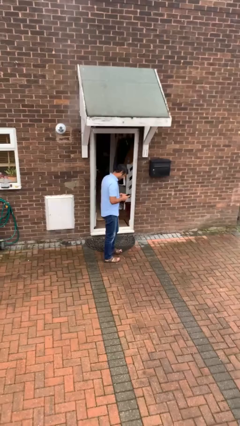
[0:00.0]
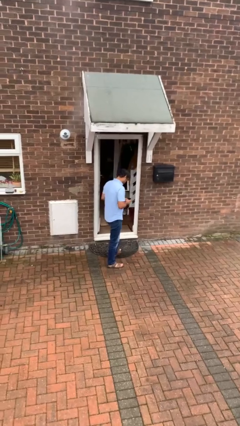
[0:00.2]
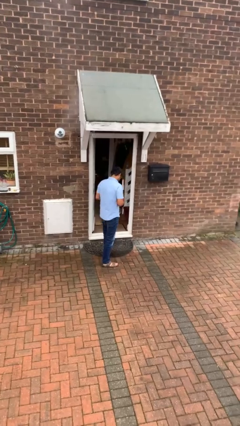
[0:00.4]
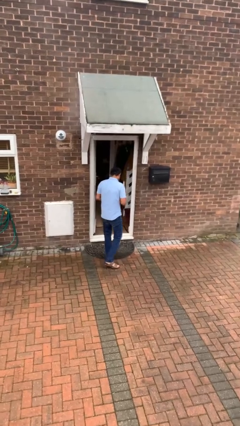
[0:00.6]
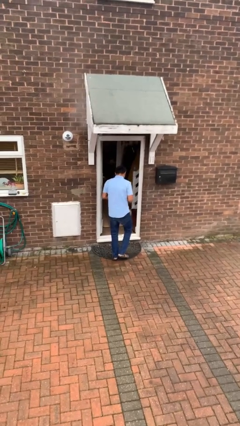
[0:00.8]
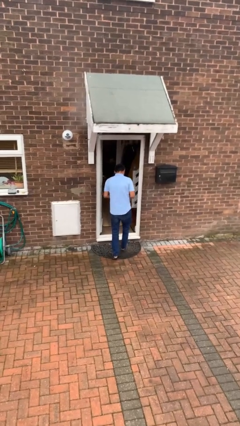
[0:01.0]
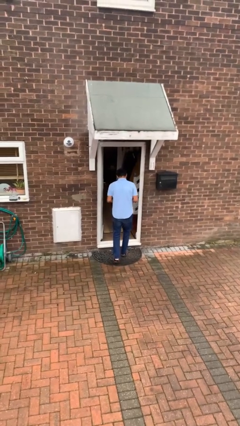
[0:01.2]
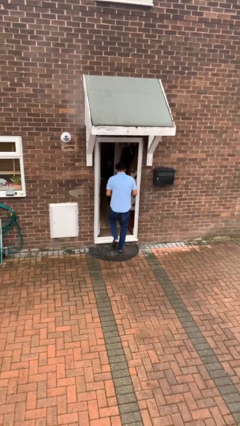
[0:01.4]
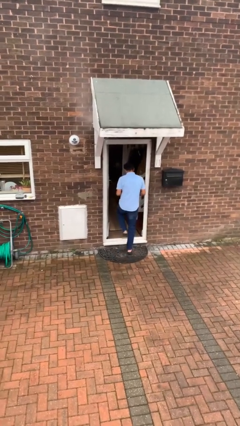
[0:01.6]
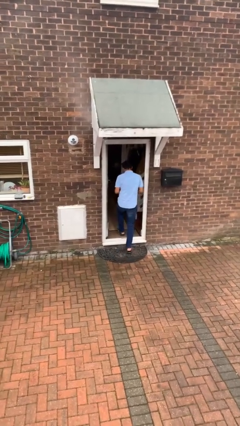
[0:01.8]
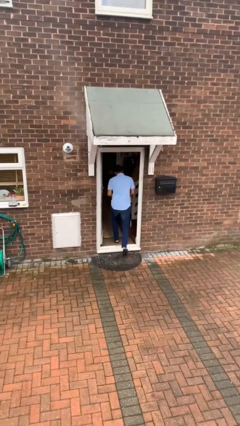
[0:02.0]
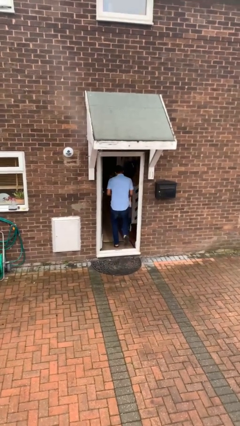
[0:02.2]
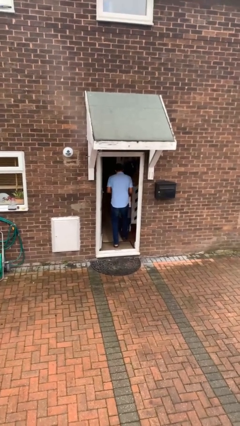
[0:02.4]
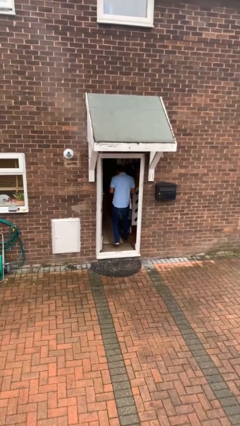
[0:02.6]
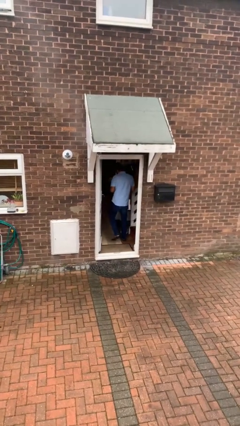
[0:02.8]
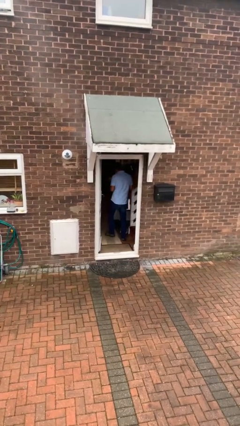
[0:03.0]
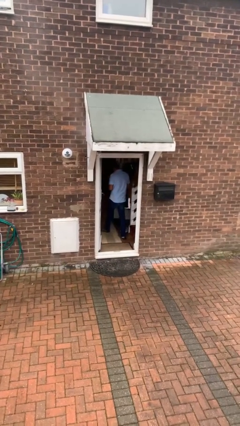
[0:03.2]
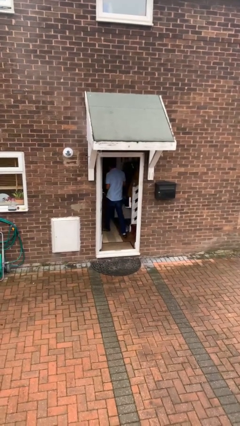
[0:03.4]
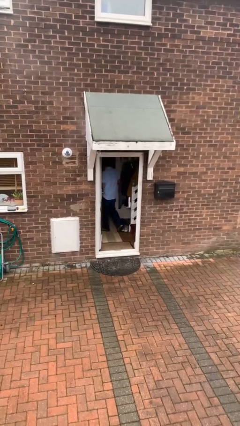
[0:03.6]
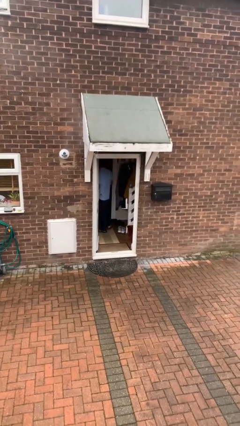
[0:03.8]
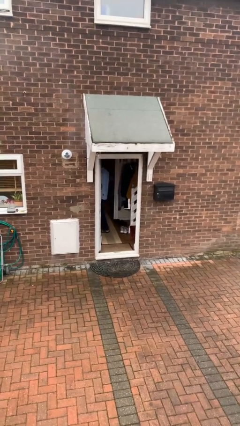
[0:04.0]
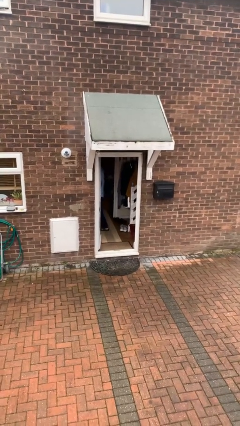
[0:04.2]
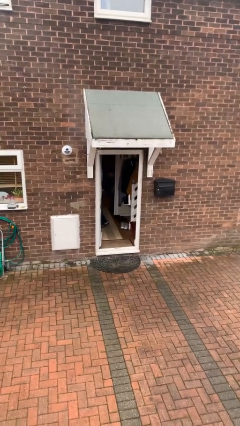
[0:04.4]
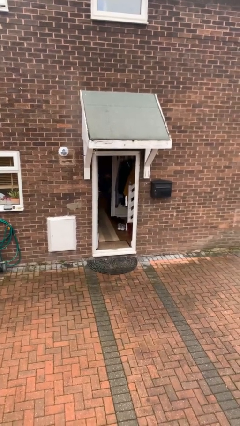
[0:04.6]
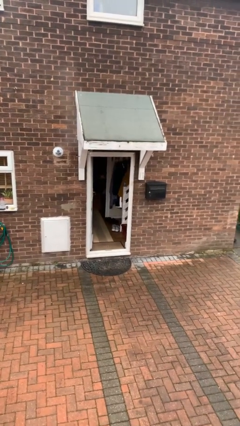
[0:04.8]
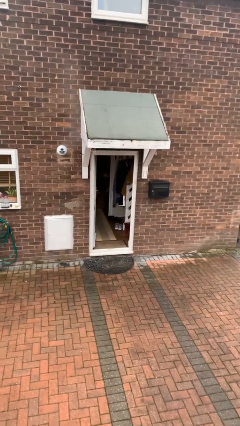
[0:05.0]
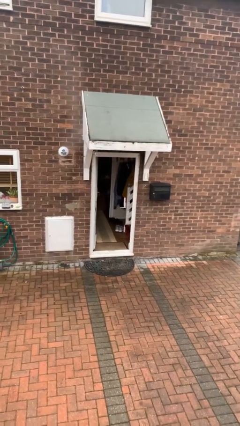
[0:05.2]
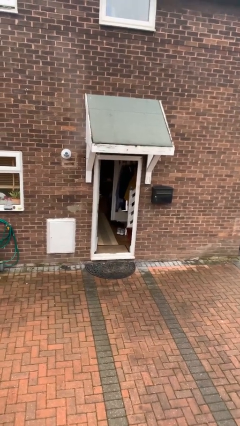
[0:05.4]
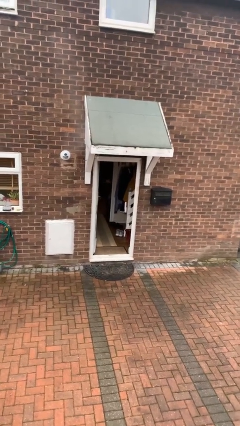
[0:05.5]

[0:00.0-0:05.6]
person exits scene through structure

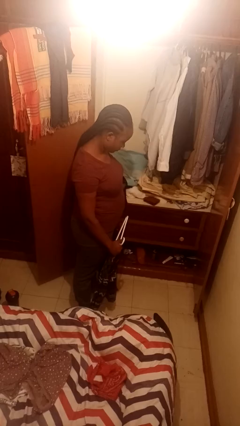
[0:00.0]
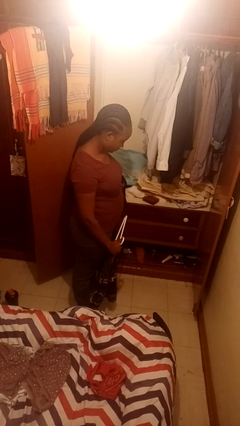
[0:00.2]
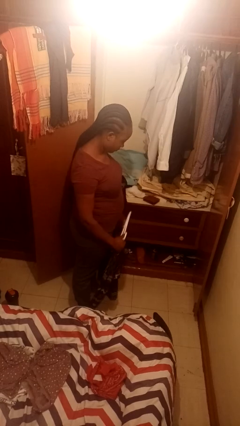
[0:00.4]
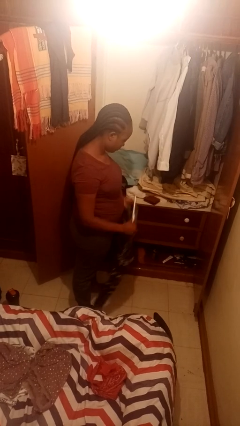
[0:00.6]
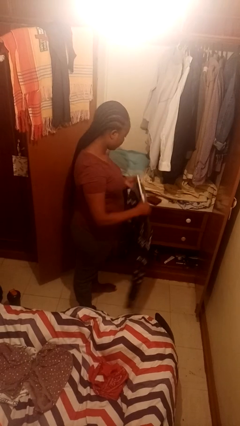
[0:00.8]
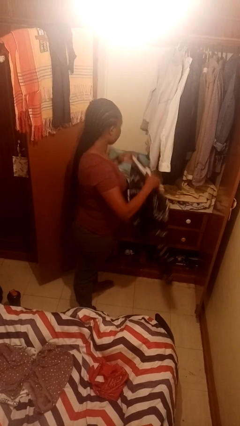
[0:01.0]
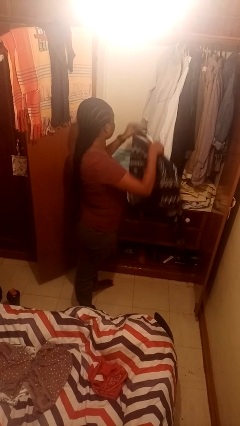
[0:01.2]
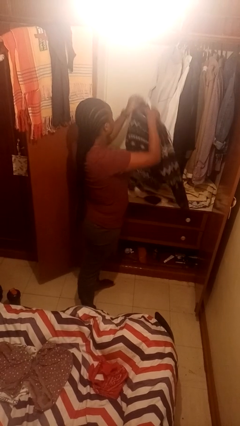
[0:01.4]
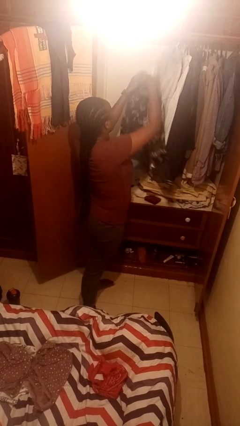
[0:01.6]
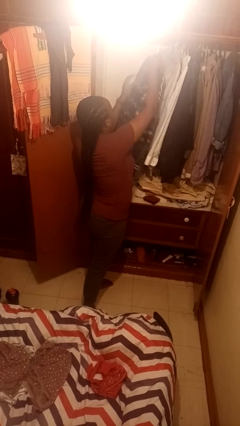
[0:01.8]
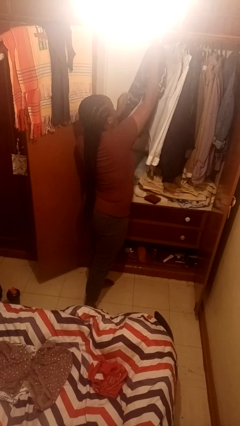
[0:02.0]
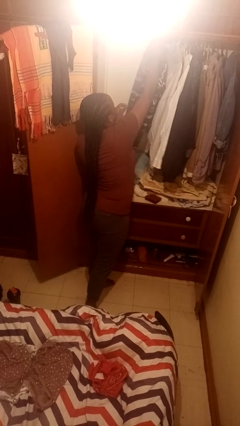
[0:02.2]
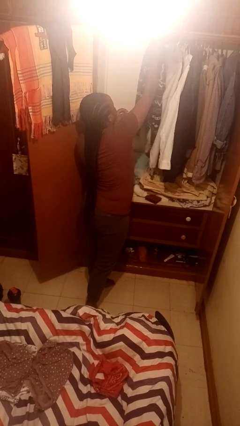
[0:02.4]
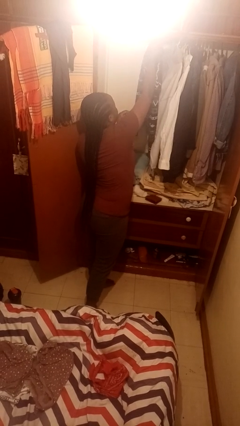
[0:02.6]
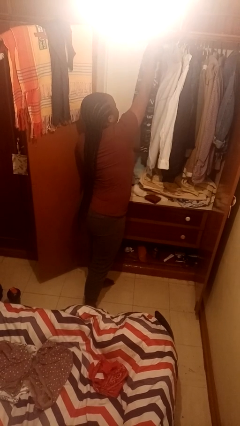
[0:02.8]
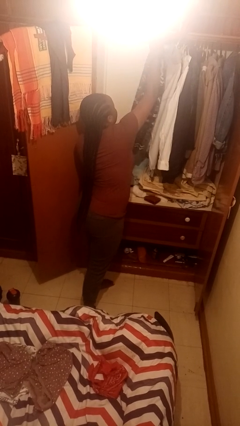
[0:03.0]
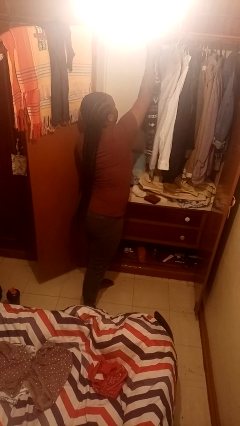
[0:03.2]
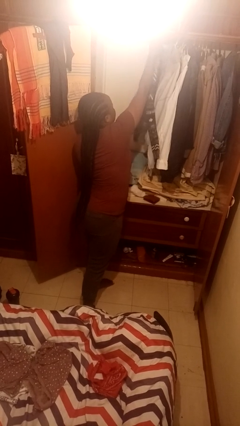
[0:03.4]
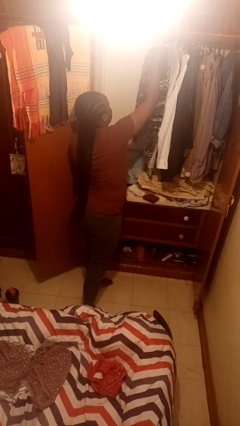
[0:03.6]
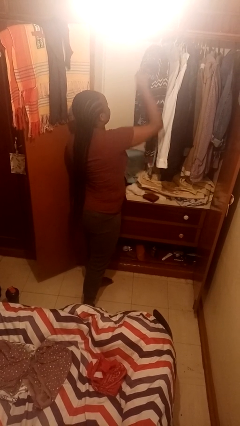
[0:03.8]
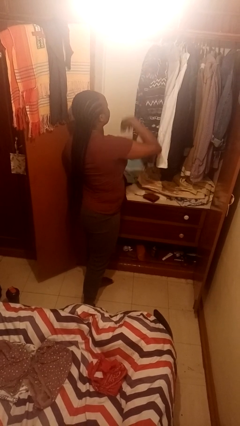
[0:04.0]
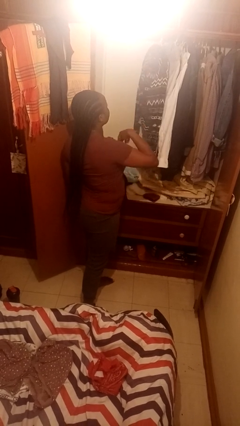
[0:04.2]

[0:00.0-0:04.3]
person puts clothes into closet

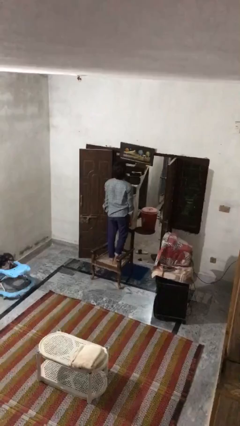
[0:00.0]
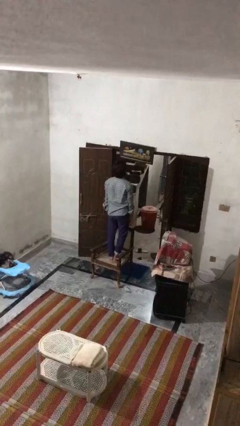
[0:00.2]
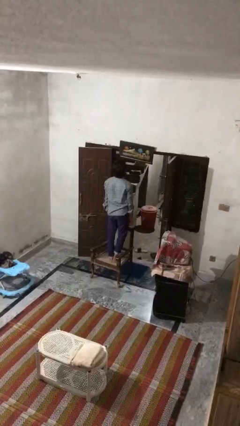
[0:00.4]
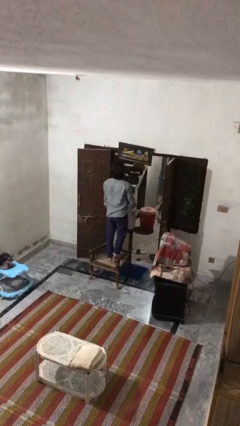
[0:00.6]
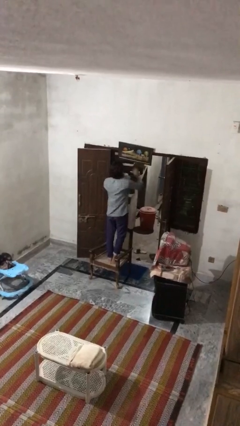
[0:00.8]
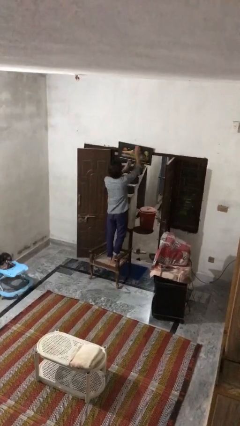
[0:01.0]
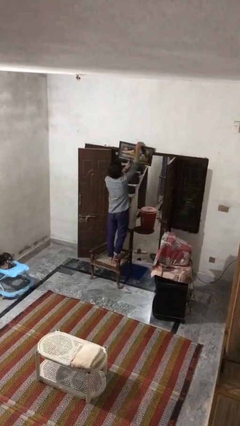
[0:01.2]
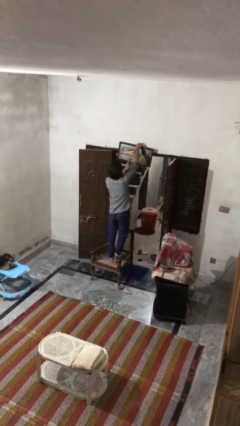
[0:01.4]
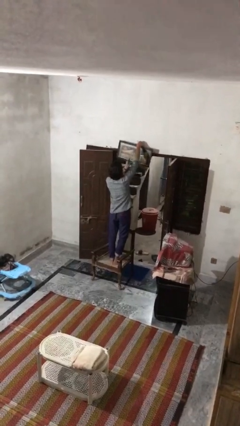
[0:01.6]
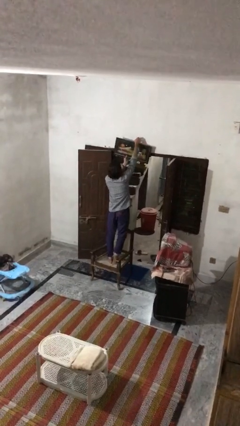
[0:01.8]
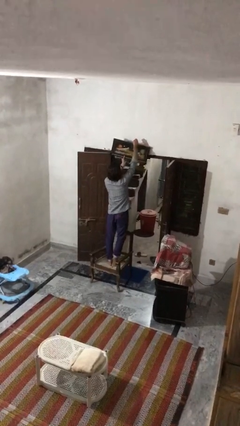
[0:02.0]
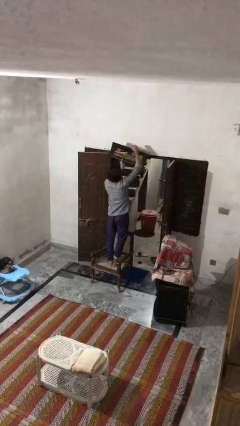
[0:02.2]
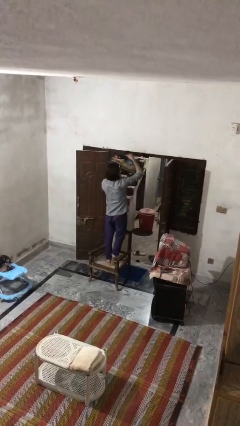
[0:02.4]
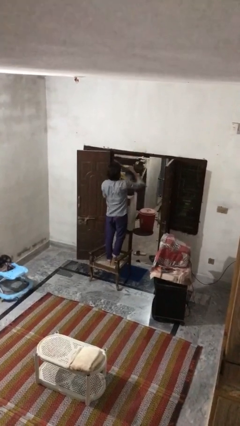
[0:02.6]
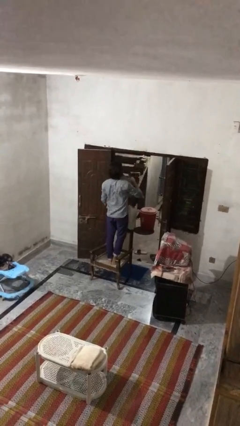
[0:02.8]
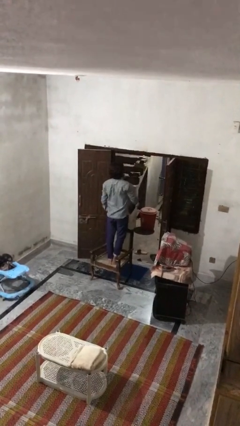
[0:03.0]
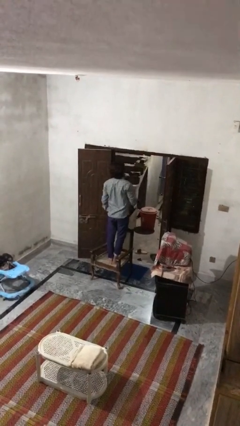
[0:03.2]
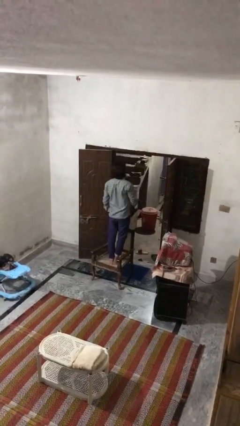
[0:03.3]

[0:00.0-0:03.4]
person takes down picture frame

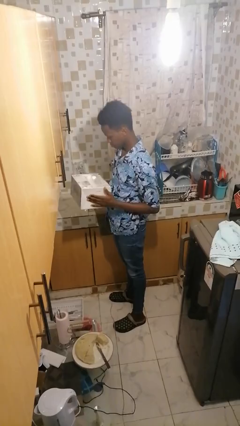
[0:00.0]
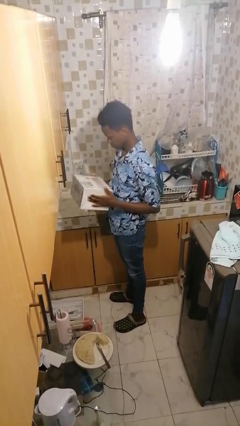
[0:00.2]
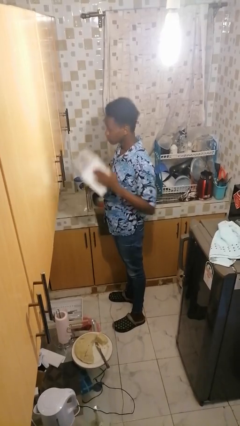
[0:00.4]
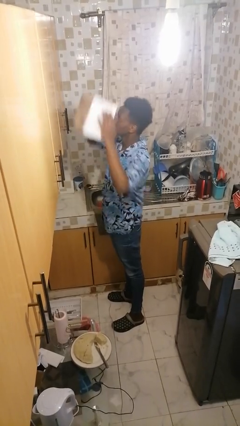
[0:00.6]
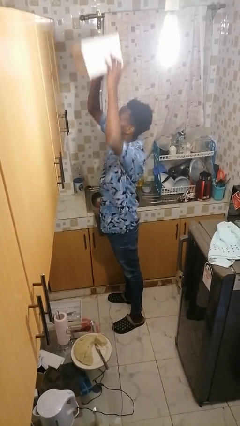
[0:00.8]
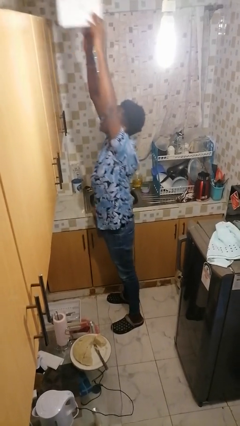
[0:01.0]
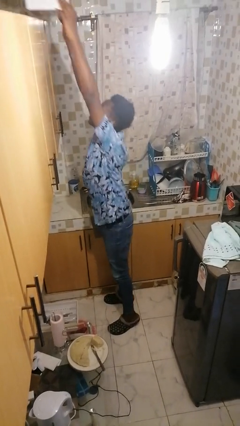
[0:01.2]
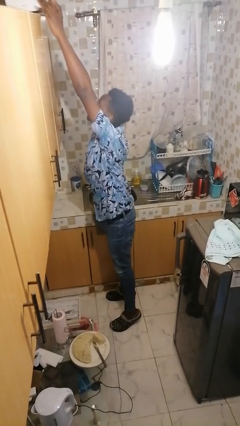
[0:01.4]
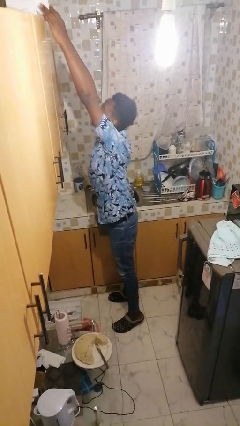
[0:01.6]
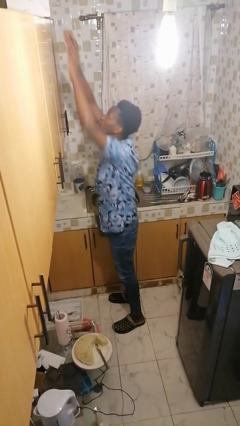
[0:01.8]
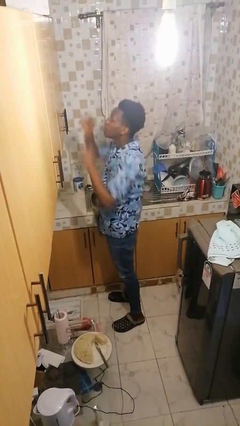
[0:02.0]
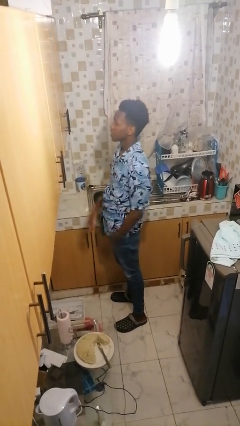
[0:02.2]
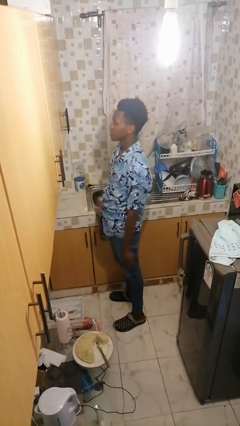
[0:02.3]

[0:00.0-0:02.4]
person puts down object on shelf

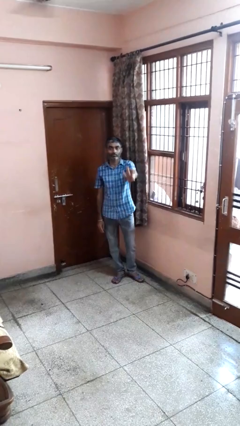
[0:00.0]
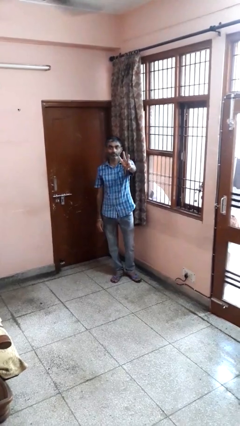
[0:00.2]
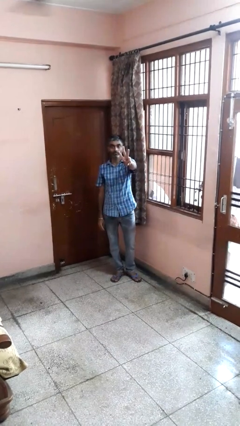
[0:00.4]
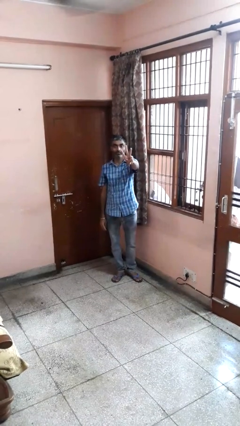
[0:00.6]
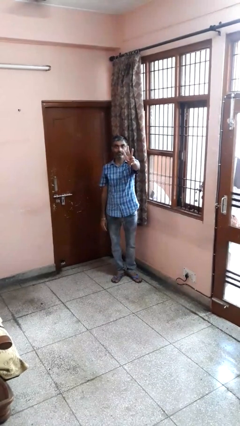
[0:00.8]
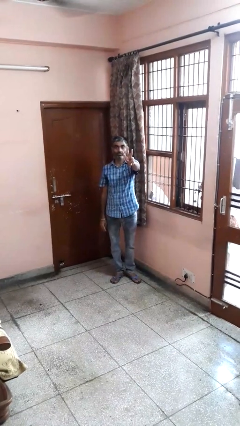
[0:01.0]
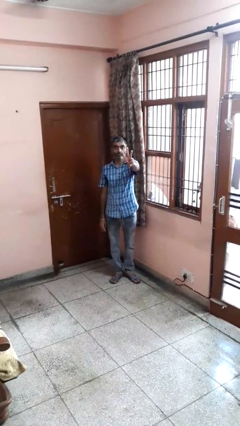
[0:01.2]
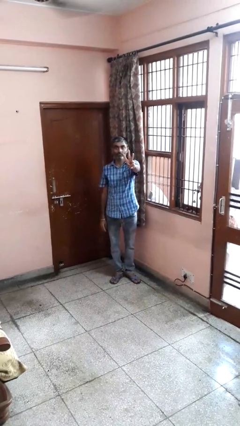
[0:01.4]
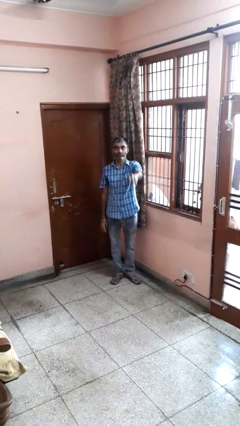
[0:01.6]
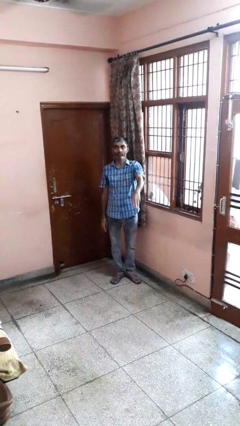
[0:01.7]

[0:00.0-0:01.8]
person gestures number three

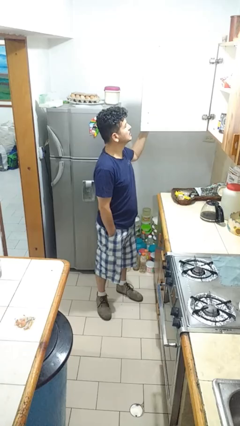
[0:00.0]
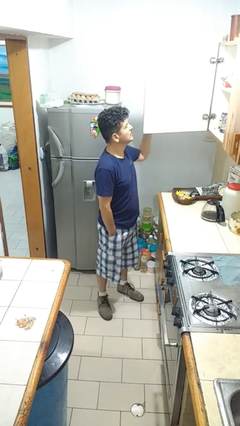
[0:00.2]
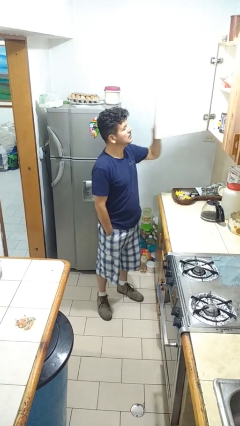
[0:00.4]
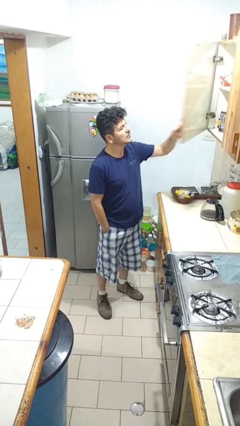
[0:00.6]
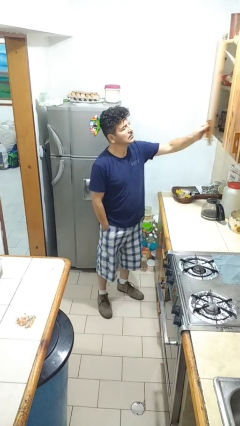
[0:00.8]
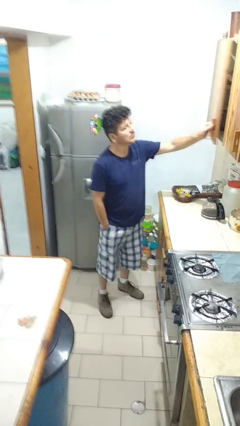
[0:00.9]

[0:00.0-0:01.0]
person closes cabinet
